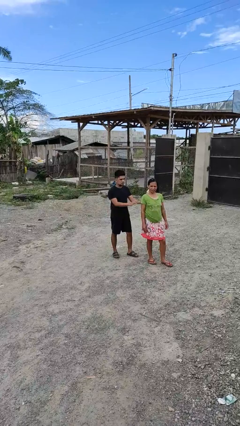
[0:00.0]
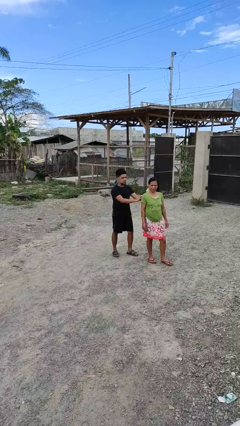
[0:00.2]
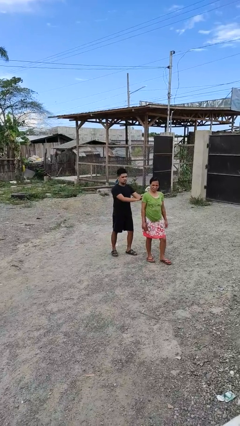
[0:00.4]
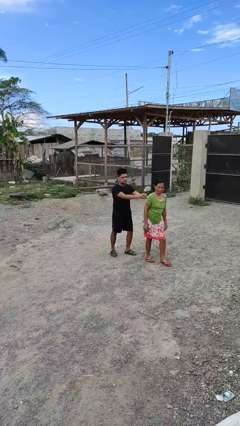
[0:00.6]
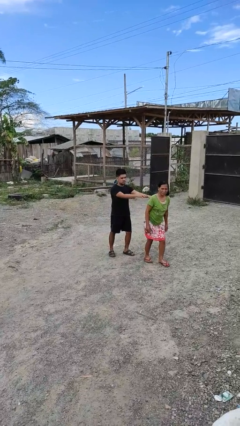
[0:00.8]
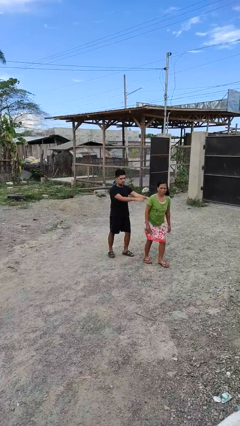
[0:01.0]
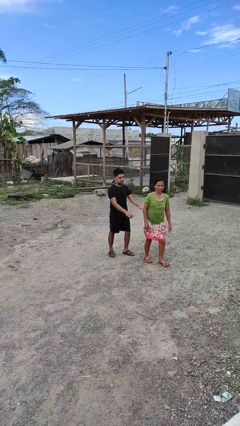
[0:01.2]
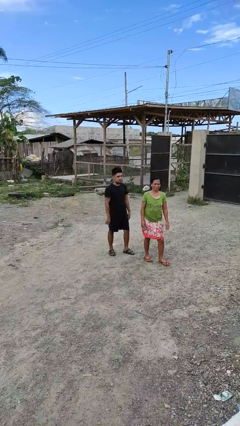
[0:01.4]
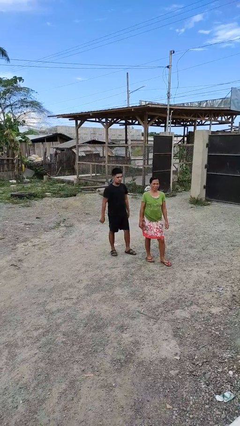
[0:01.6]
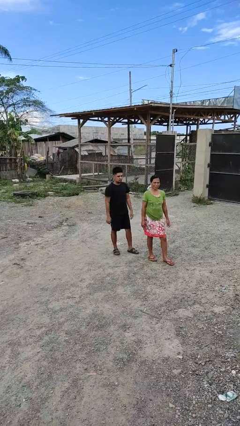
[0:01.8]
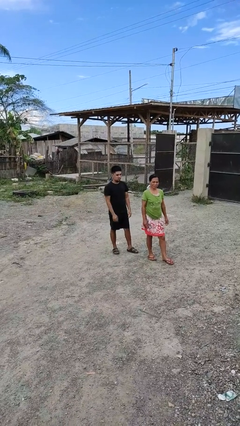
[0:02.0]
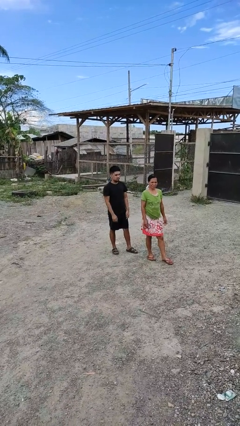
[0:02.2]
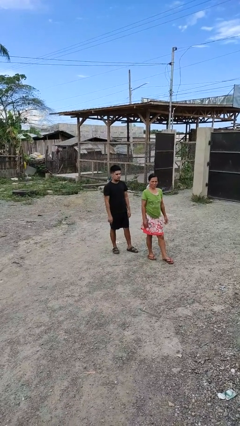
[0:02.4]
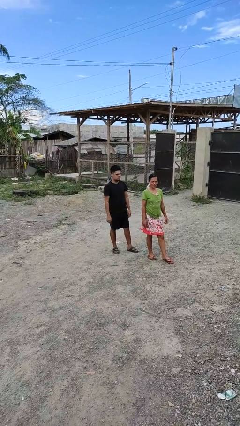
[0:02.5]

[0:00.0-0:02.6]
person shoves person

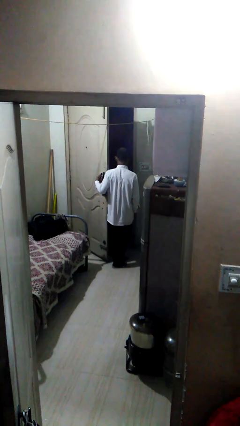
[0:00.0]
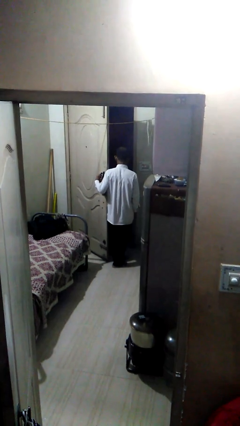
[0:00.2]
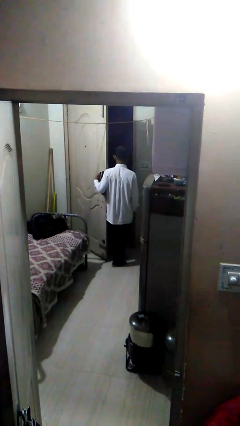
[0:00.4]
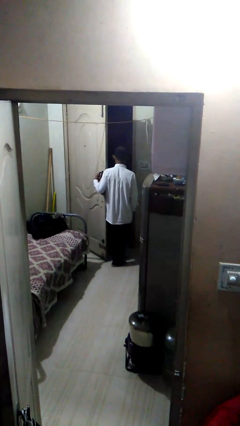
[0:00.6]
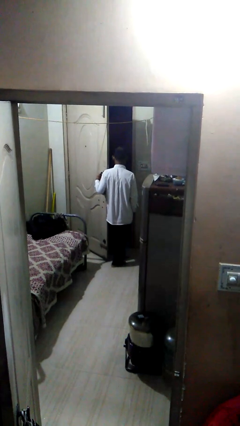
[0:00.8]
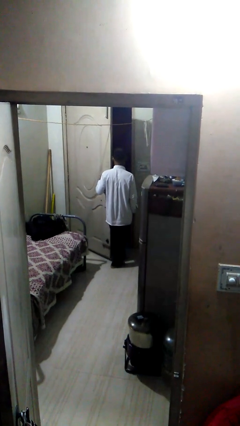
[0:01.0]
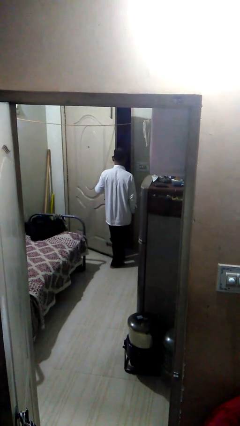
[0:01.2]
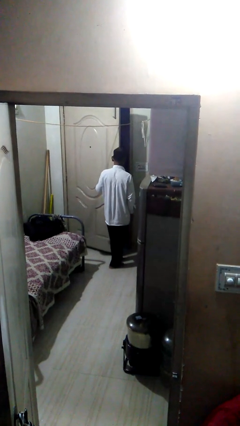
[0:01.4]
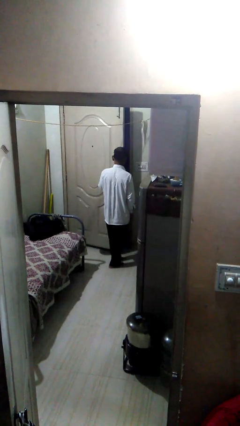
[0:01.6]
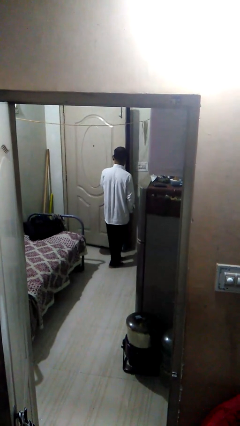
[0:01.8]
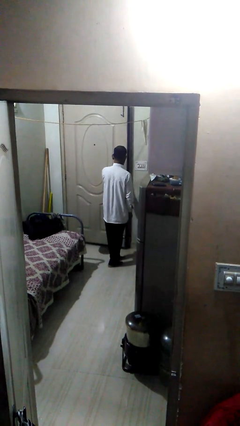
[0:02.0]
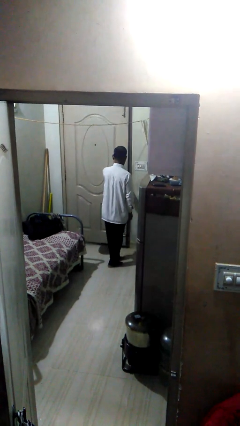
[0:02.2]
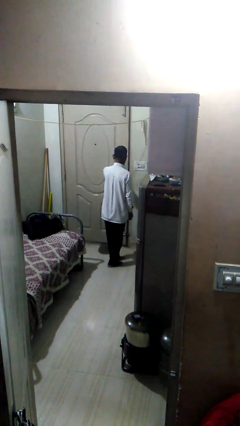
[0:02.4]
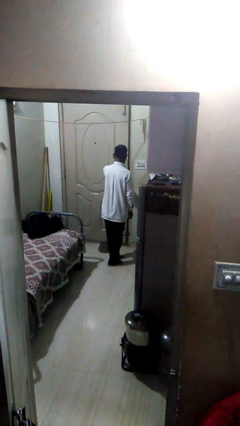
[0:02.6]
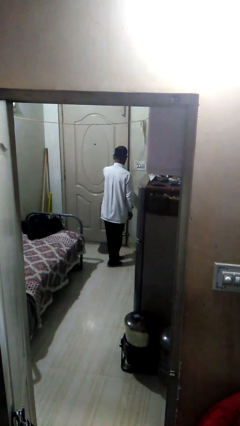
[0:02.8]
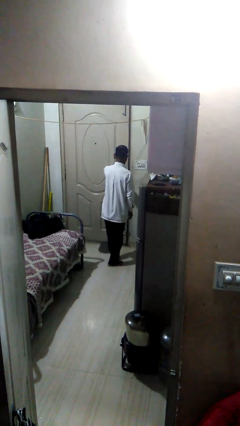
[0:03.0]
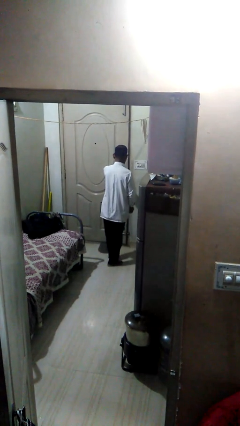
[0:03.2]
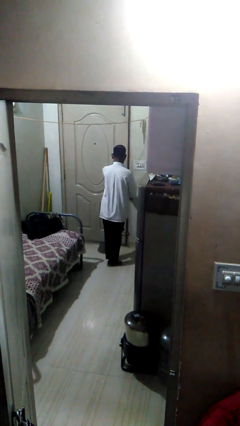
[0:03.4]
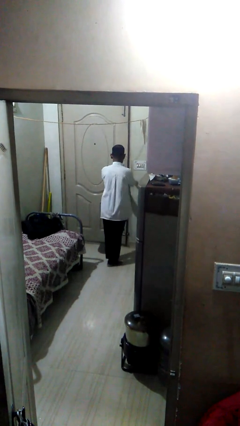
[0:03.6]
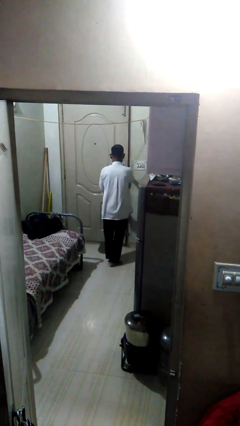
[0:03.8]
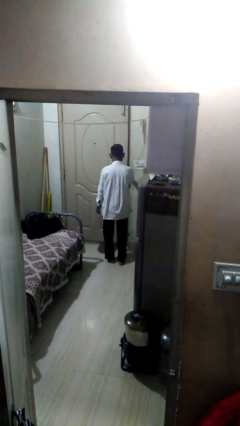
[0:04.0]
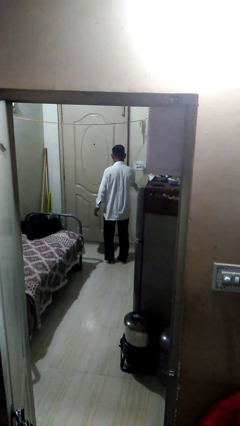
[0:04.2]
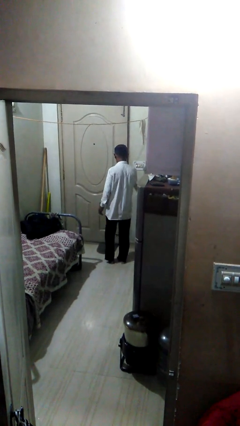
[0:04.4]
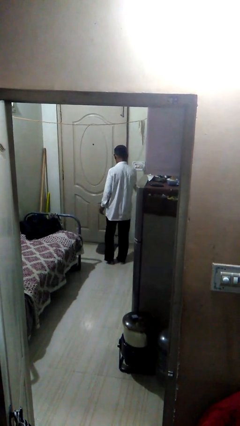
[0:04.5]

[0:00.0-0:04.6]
person closes facility door

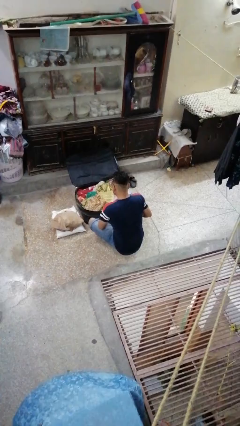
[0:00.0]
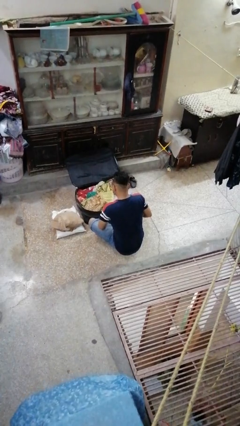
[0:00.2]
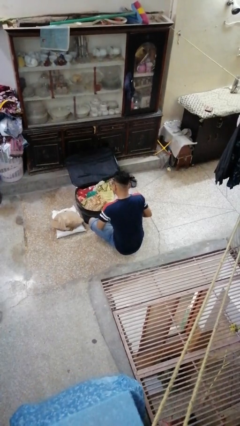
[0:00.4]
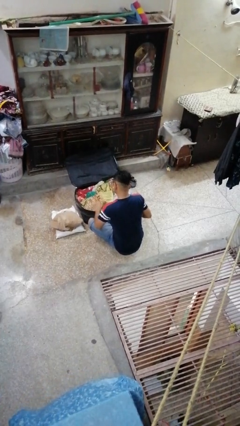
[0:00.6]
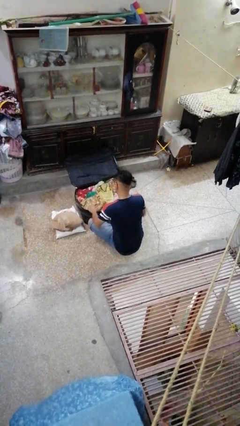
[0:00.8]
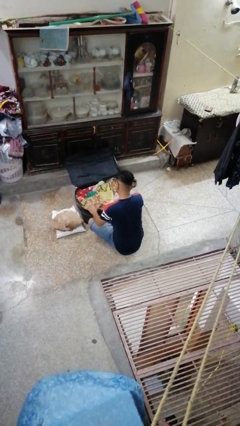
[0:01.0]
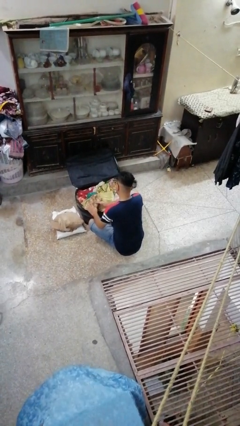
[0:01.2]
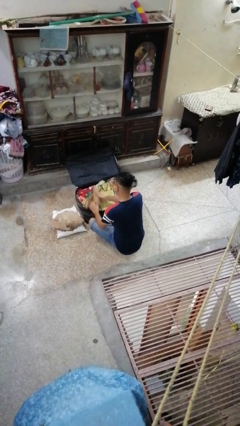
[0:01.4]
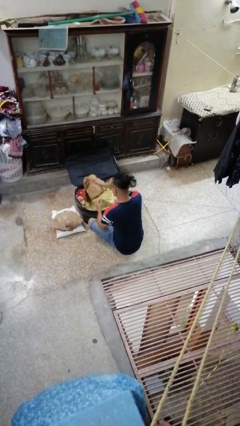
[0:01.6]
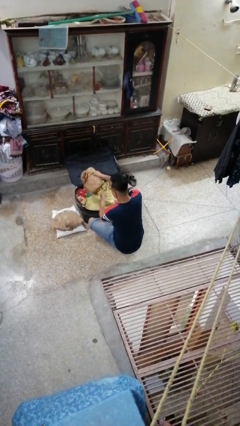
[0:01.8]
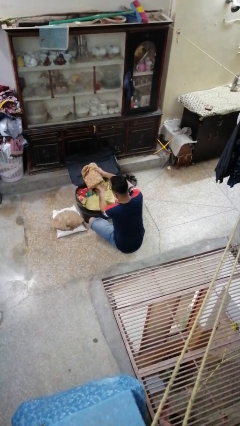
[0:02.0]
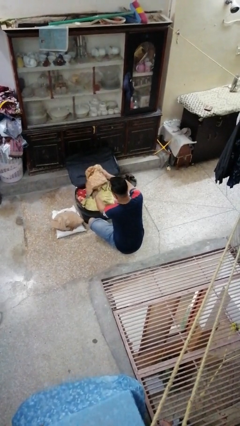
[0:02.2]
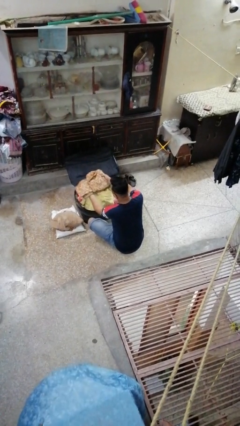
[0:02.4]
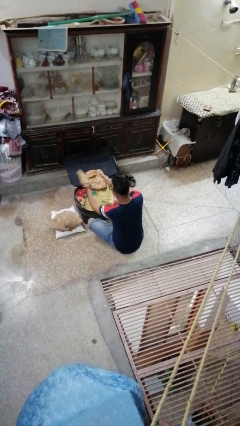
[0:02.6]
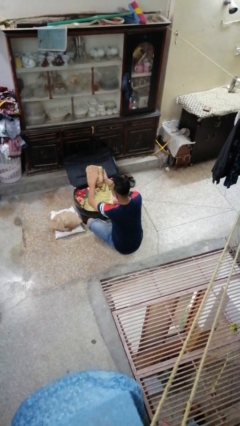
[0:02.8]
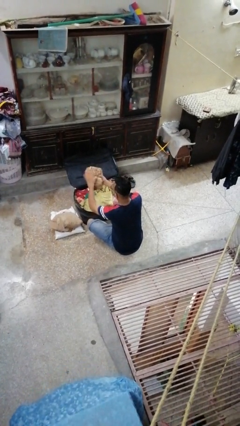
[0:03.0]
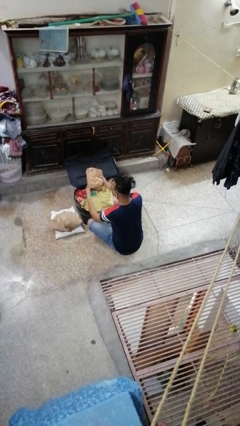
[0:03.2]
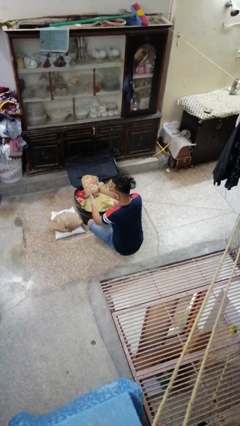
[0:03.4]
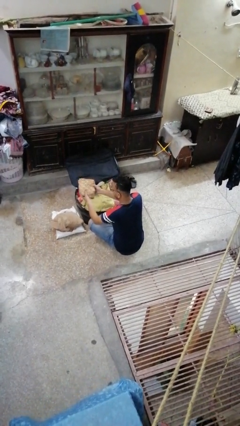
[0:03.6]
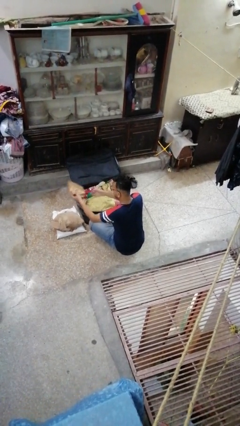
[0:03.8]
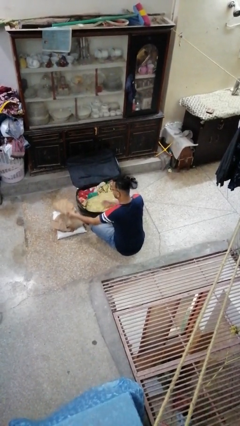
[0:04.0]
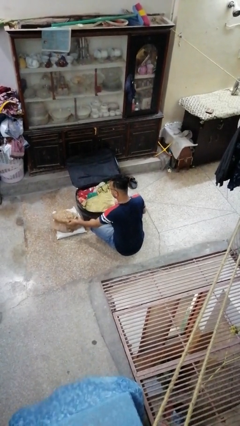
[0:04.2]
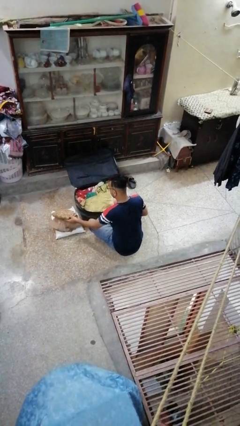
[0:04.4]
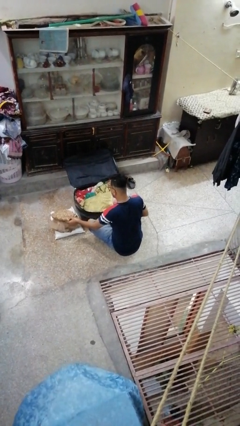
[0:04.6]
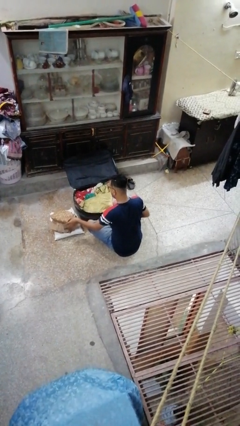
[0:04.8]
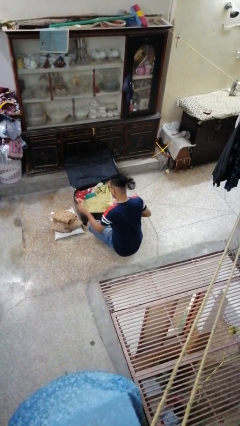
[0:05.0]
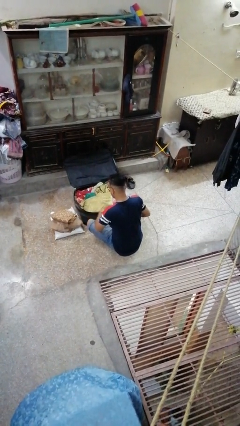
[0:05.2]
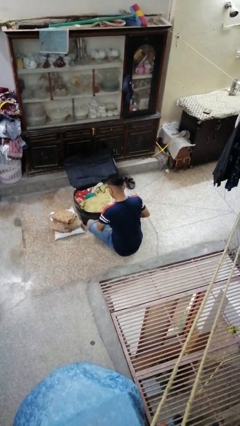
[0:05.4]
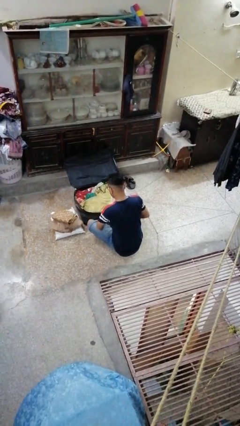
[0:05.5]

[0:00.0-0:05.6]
person unloads clothes from suitcase

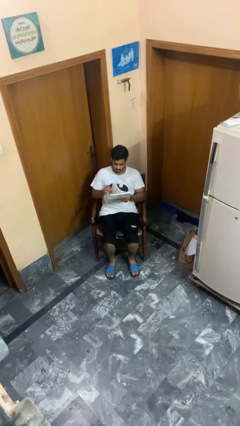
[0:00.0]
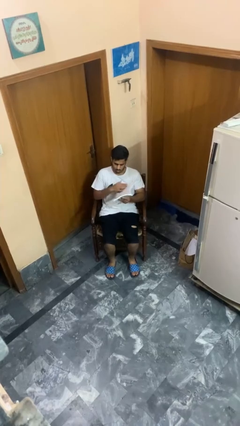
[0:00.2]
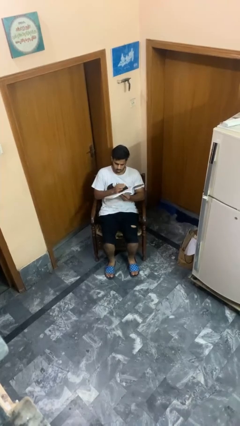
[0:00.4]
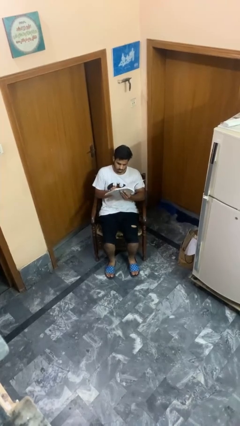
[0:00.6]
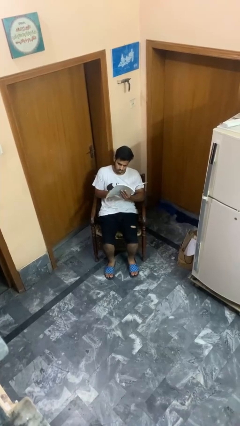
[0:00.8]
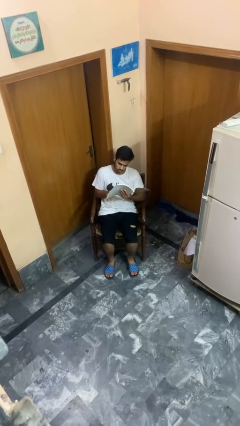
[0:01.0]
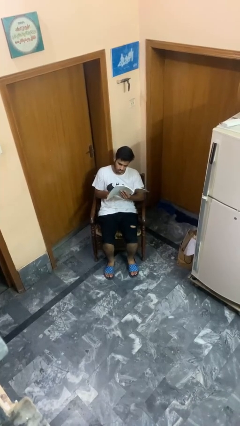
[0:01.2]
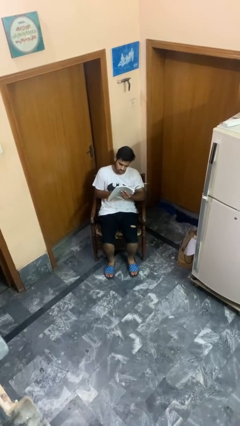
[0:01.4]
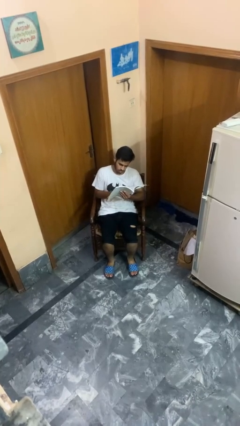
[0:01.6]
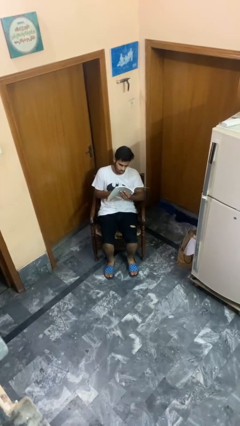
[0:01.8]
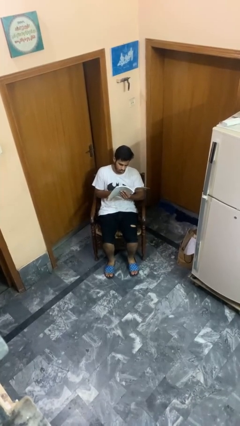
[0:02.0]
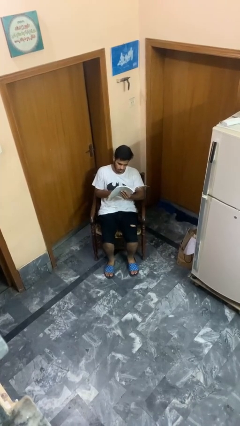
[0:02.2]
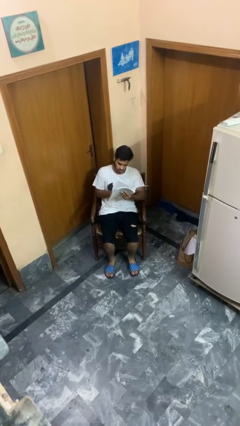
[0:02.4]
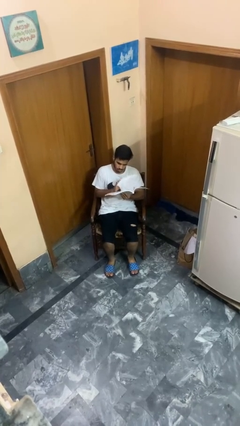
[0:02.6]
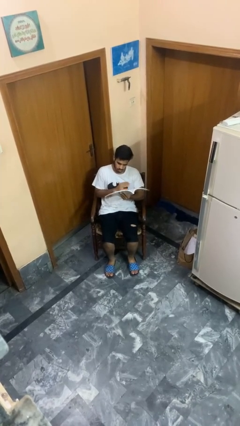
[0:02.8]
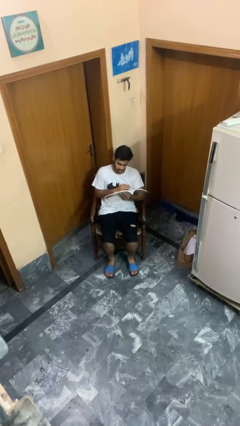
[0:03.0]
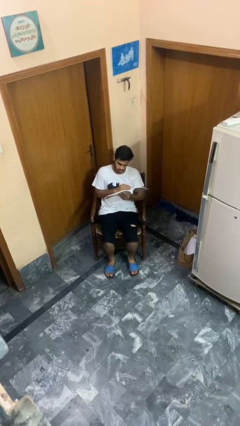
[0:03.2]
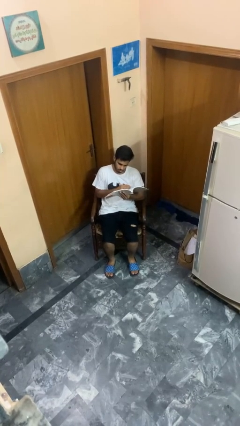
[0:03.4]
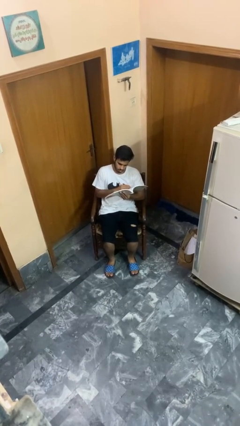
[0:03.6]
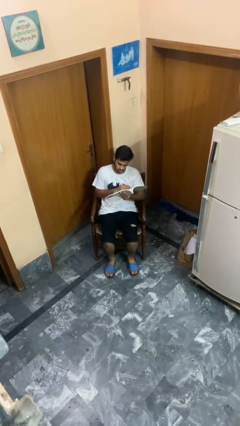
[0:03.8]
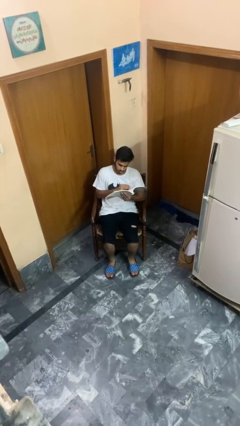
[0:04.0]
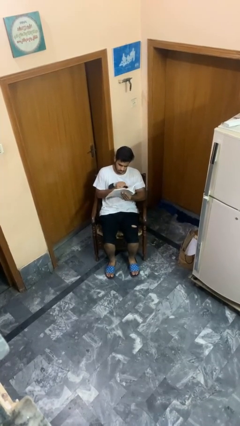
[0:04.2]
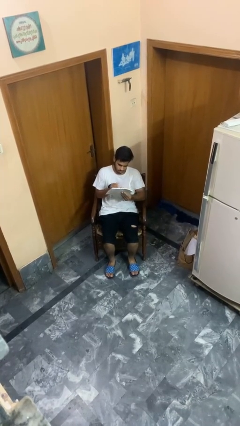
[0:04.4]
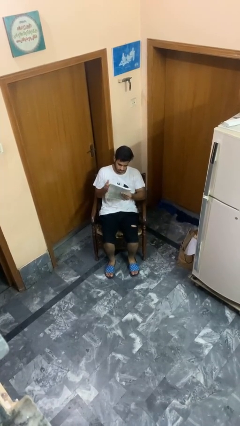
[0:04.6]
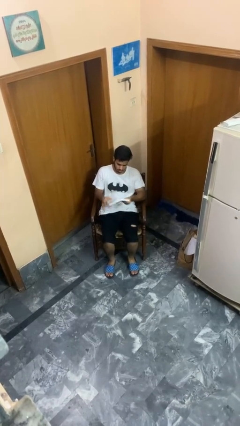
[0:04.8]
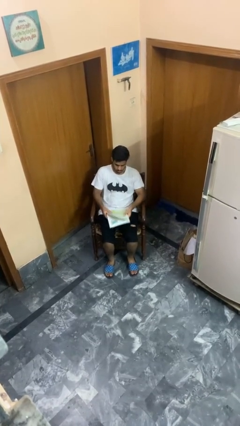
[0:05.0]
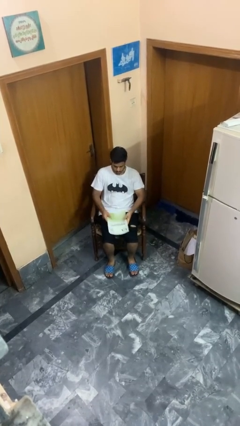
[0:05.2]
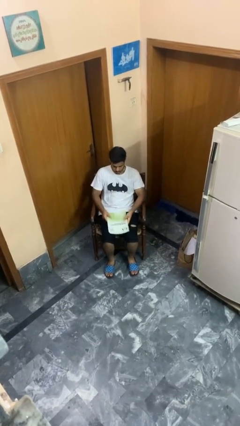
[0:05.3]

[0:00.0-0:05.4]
person reads book
